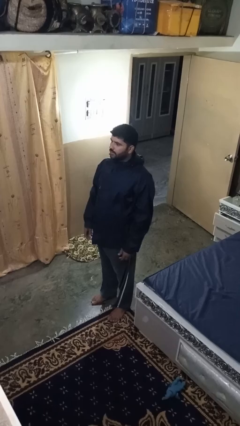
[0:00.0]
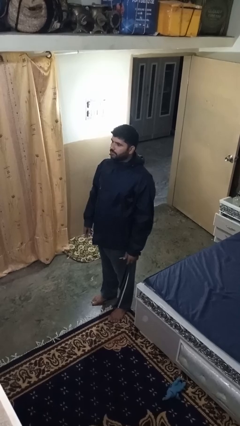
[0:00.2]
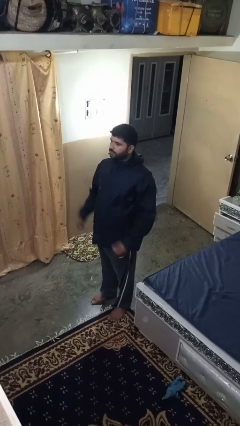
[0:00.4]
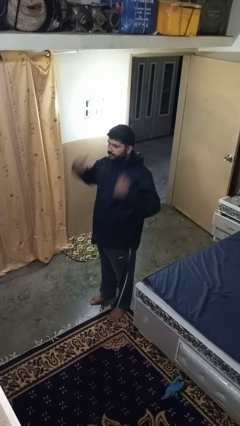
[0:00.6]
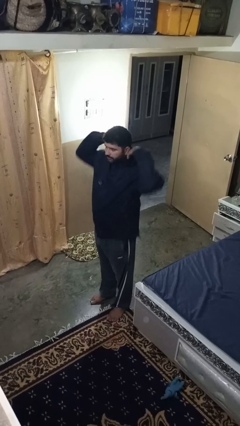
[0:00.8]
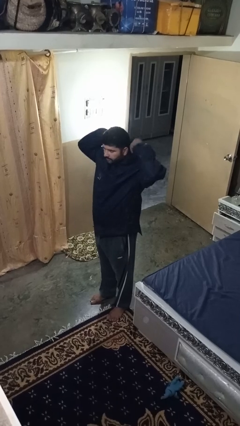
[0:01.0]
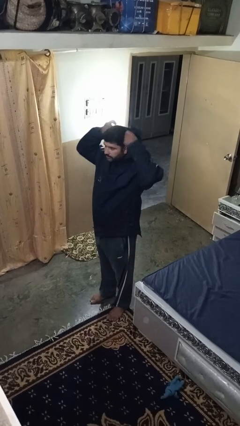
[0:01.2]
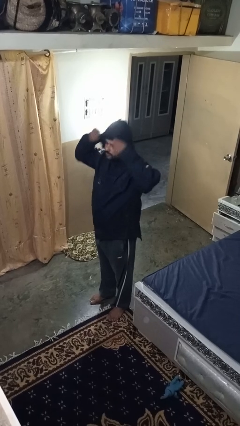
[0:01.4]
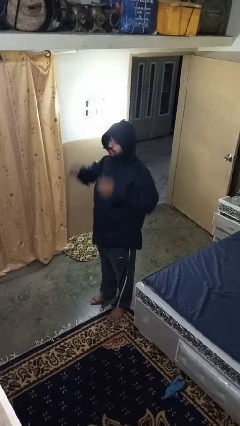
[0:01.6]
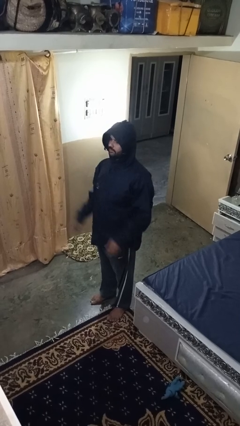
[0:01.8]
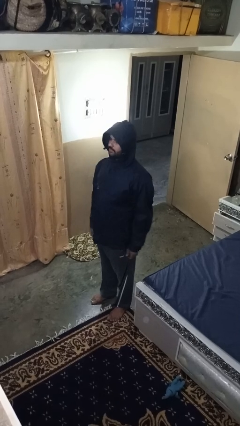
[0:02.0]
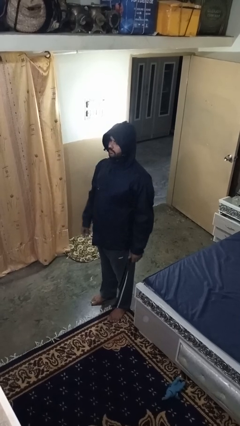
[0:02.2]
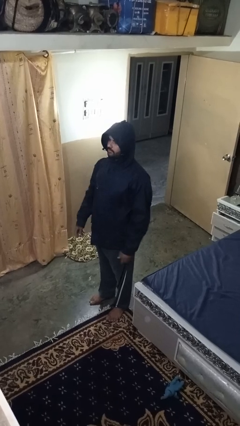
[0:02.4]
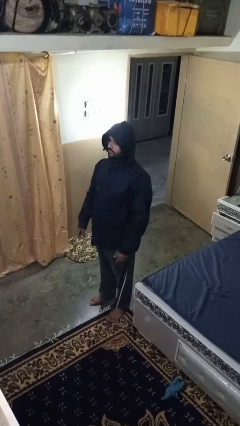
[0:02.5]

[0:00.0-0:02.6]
person puts on hoodie

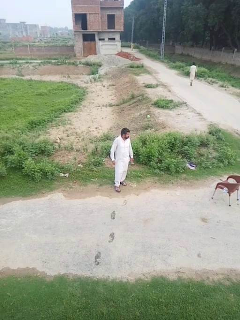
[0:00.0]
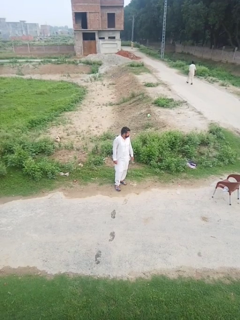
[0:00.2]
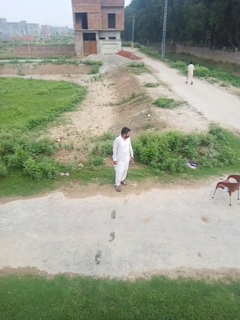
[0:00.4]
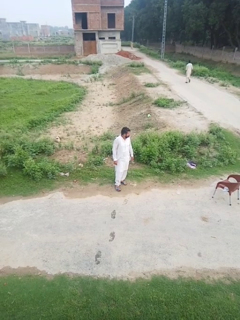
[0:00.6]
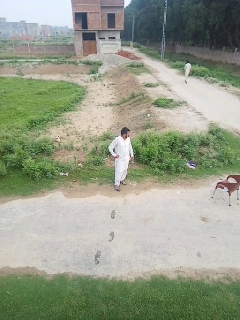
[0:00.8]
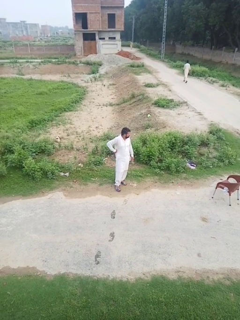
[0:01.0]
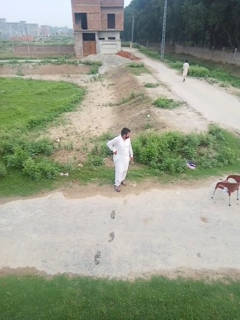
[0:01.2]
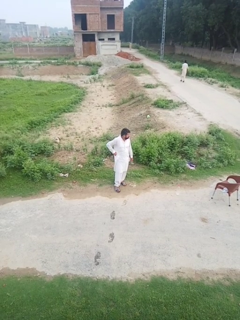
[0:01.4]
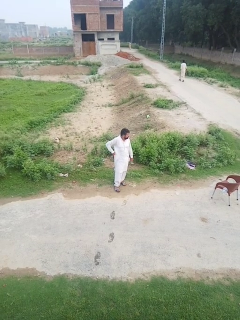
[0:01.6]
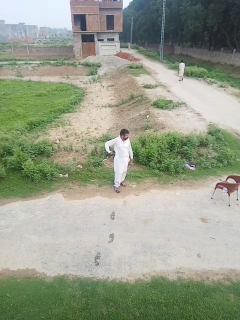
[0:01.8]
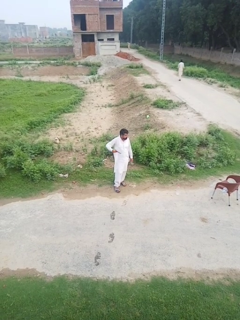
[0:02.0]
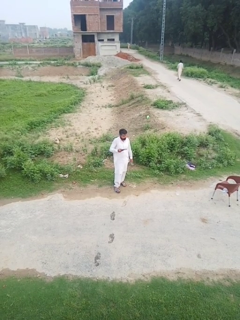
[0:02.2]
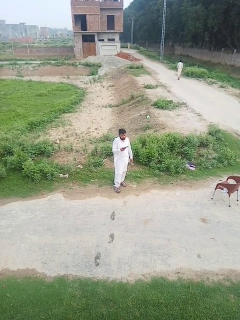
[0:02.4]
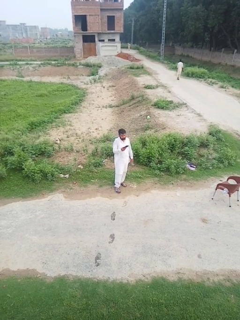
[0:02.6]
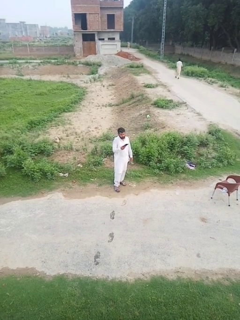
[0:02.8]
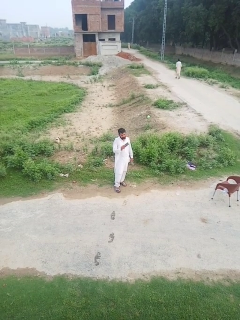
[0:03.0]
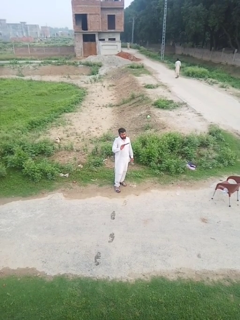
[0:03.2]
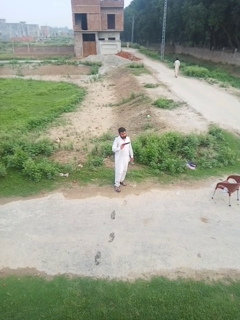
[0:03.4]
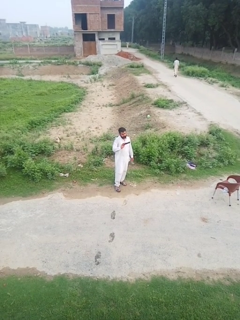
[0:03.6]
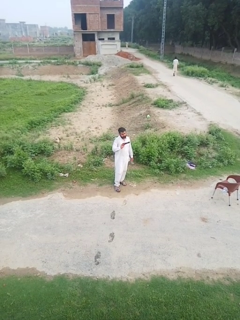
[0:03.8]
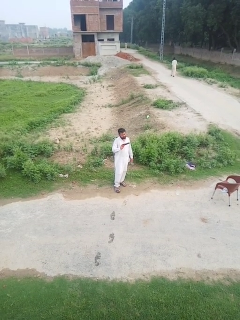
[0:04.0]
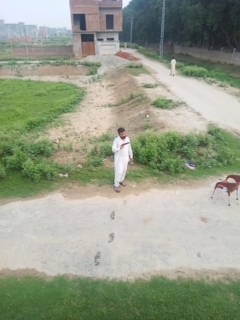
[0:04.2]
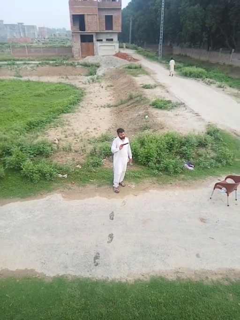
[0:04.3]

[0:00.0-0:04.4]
person takes phone from pocket

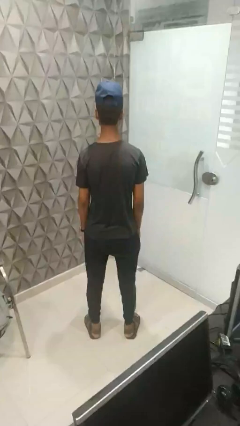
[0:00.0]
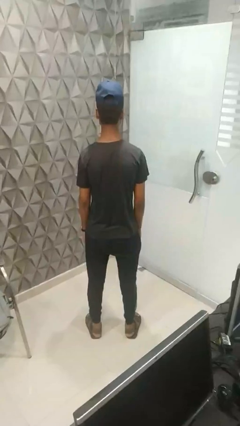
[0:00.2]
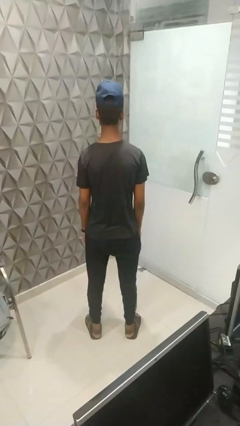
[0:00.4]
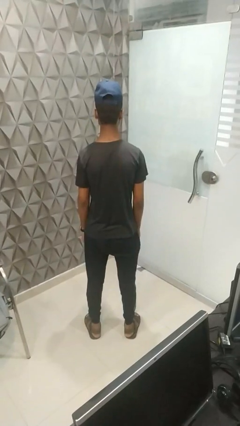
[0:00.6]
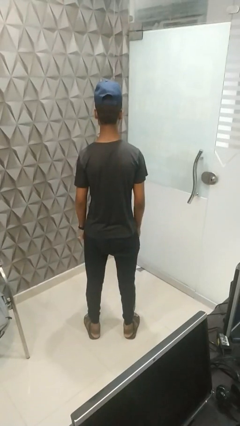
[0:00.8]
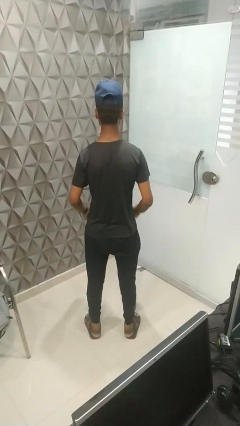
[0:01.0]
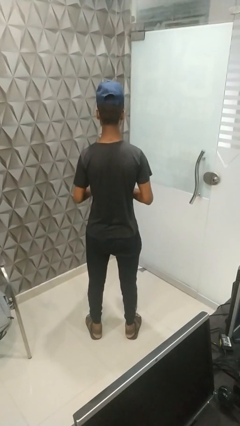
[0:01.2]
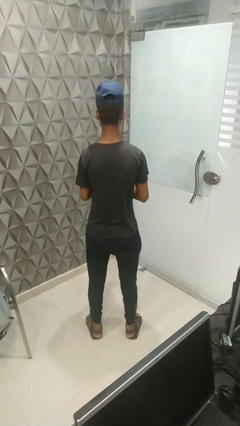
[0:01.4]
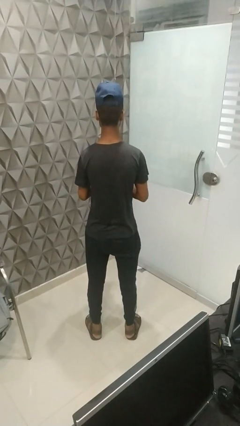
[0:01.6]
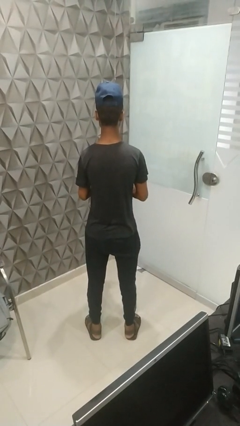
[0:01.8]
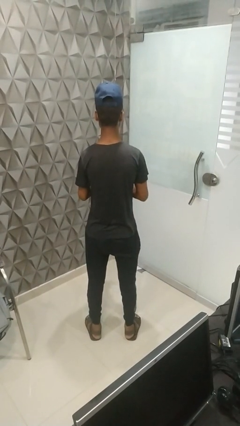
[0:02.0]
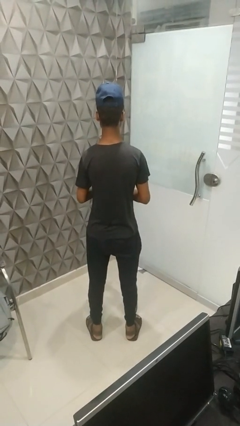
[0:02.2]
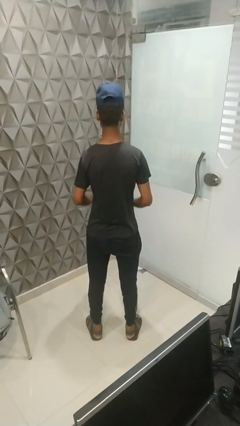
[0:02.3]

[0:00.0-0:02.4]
person claps hands

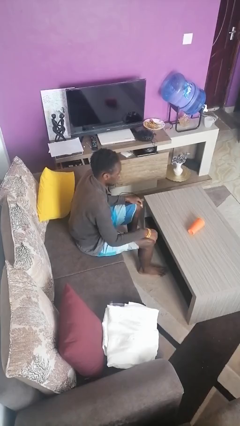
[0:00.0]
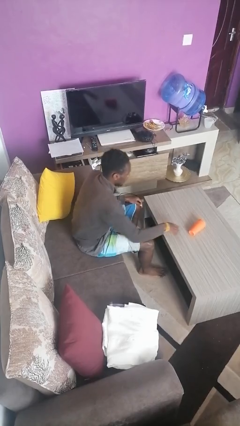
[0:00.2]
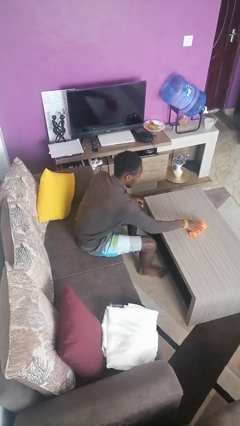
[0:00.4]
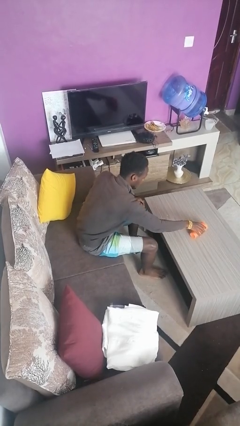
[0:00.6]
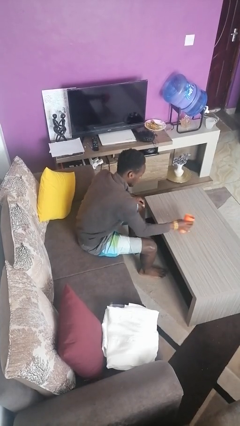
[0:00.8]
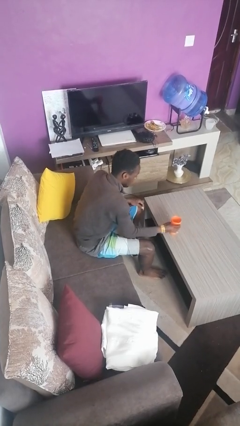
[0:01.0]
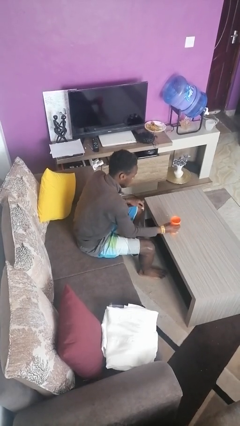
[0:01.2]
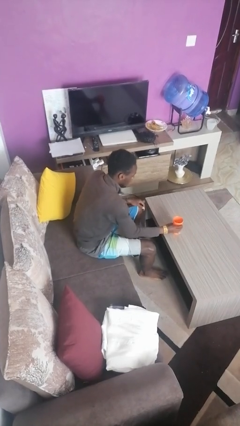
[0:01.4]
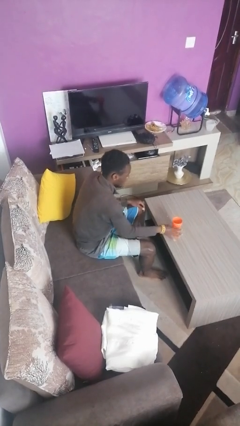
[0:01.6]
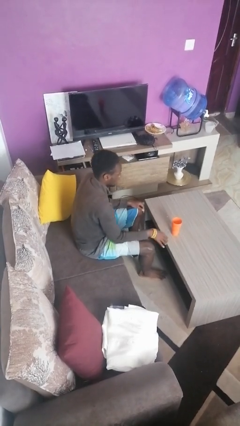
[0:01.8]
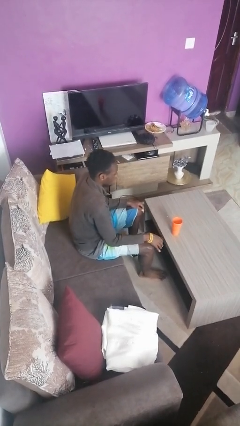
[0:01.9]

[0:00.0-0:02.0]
person sets upright glass

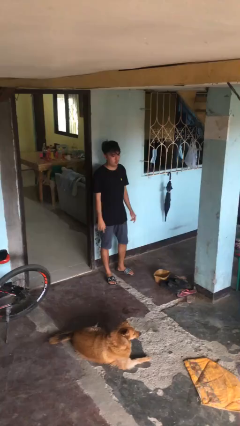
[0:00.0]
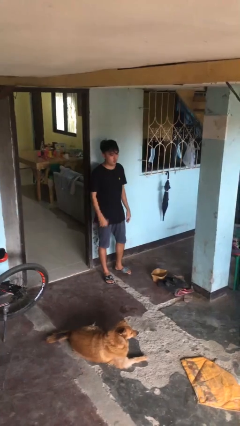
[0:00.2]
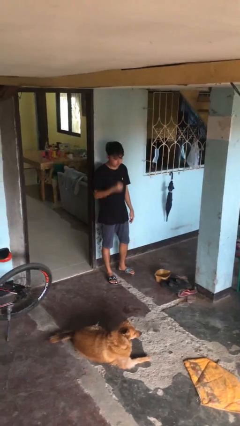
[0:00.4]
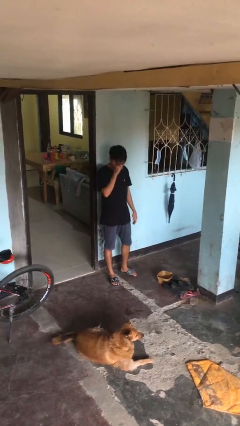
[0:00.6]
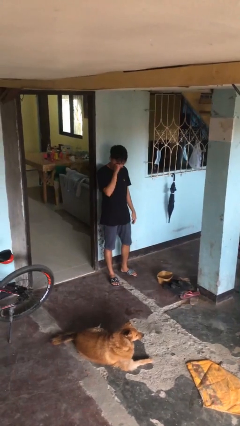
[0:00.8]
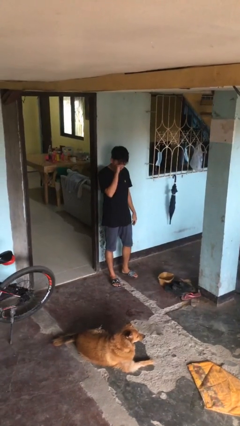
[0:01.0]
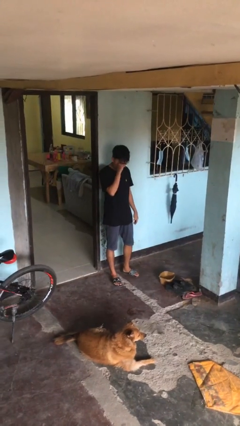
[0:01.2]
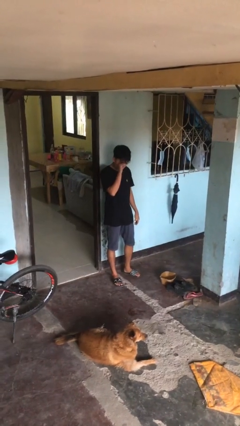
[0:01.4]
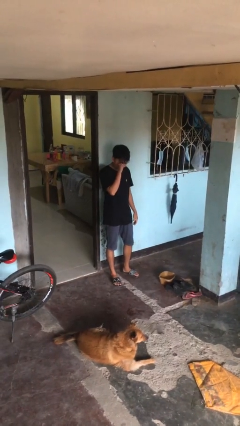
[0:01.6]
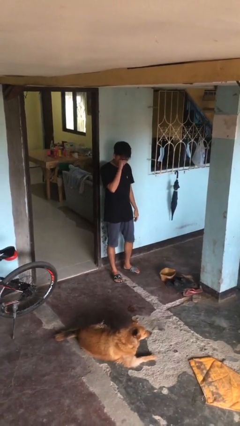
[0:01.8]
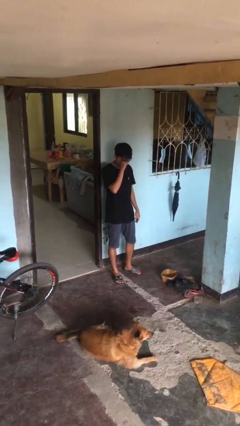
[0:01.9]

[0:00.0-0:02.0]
person rubs eyes

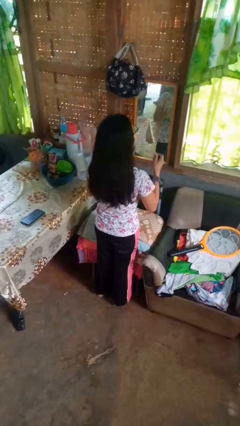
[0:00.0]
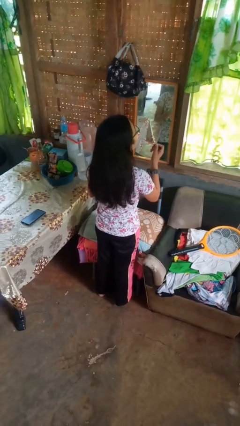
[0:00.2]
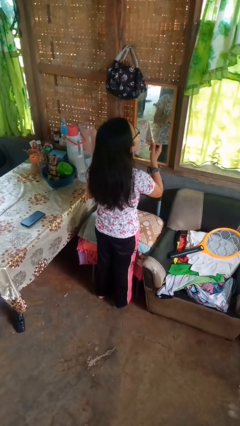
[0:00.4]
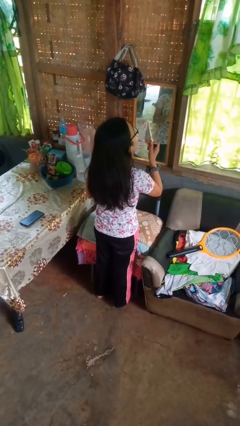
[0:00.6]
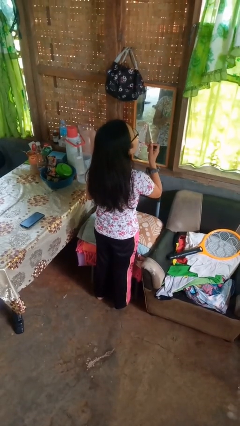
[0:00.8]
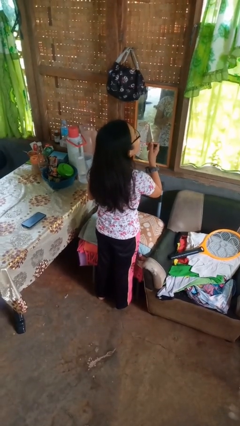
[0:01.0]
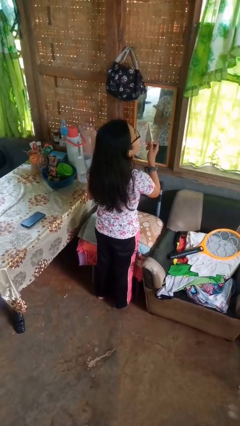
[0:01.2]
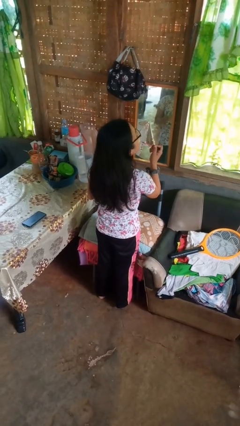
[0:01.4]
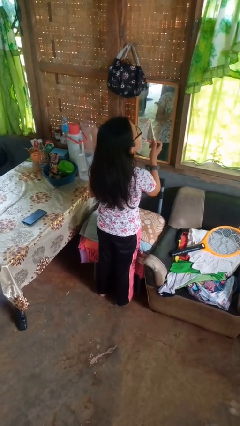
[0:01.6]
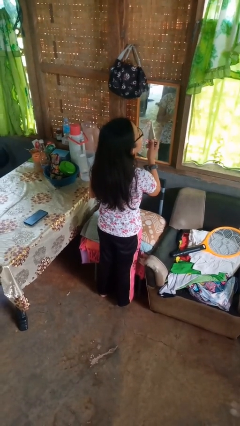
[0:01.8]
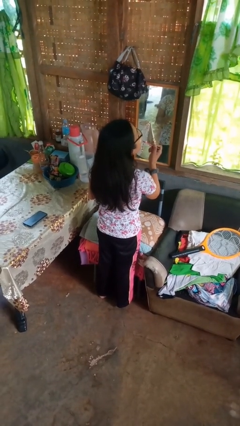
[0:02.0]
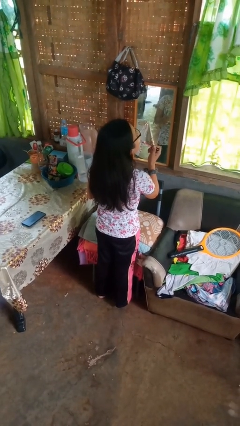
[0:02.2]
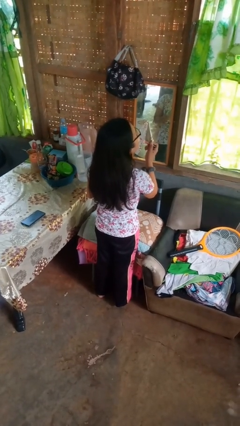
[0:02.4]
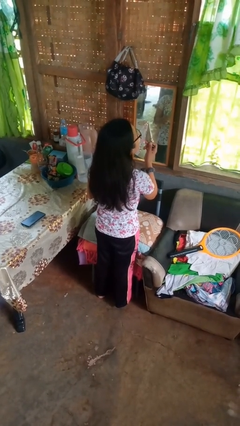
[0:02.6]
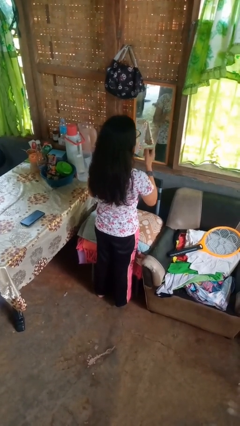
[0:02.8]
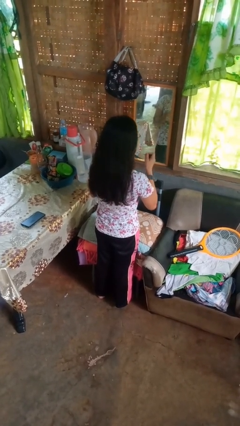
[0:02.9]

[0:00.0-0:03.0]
person applies lip makeup

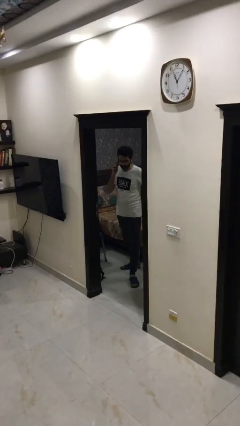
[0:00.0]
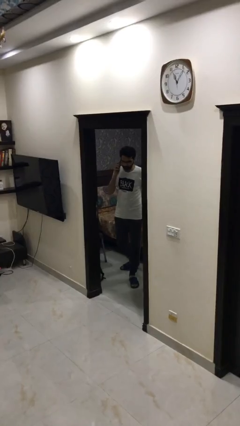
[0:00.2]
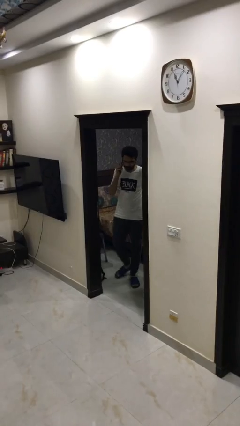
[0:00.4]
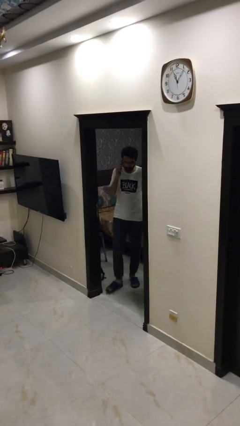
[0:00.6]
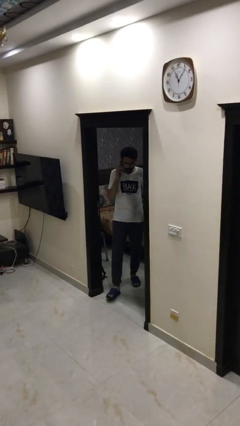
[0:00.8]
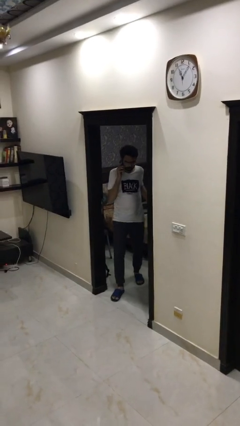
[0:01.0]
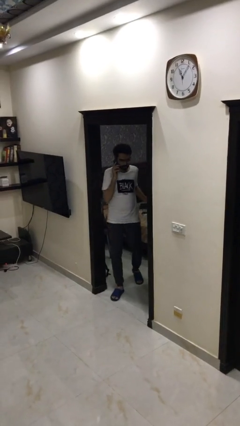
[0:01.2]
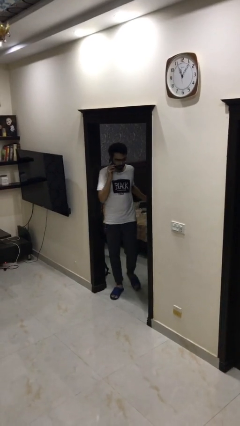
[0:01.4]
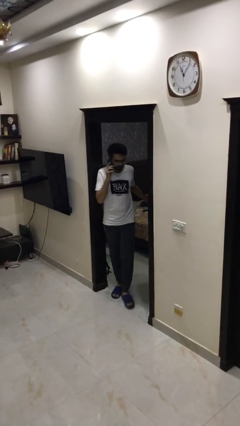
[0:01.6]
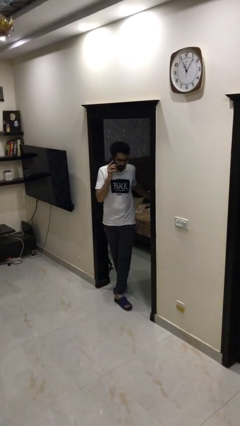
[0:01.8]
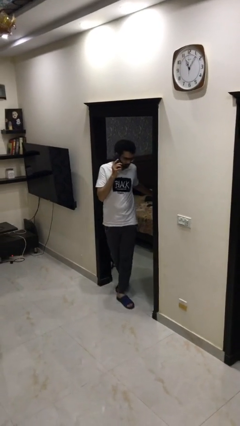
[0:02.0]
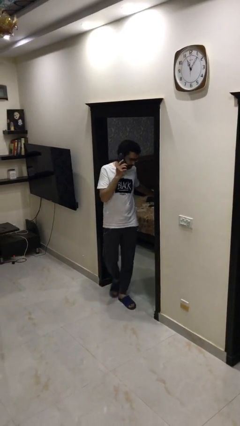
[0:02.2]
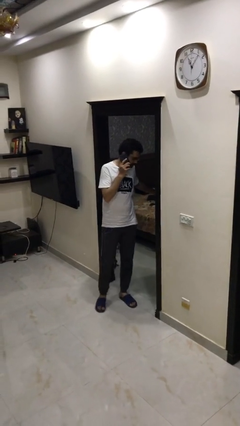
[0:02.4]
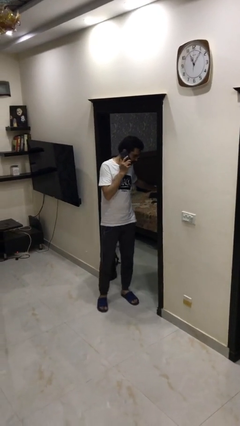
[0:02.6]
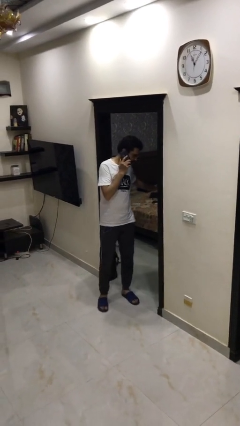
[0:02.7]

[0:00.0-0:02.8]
person enters scene through structure
